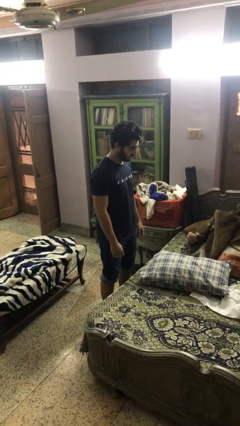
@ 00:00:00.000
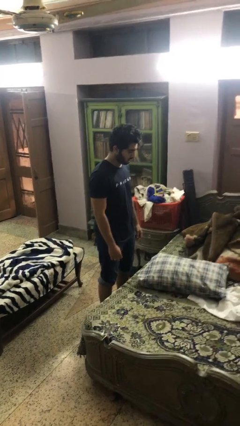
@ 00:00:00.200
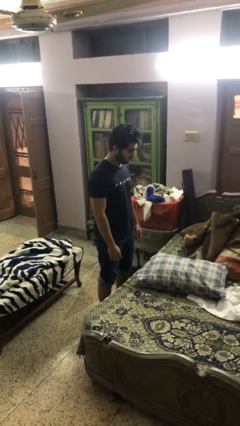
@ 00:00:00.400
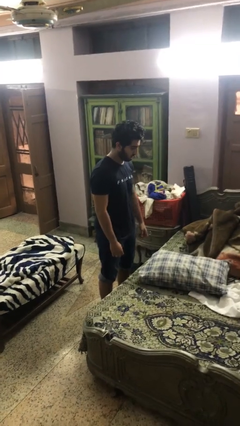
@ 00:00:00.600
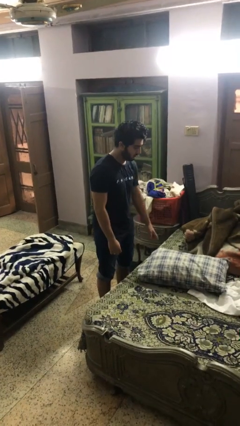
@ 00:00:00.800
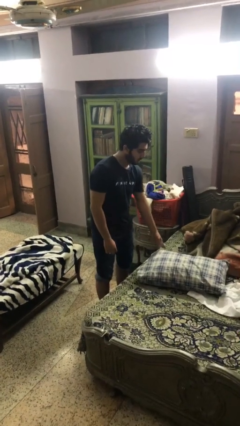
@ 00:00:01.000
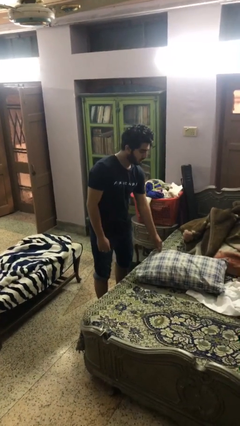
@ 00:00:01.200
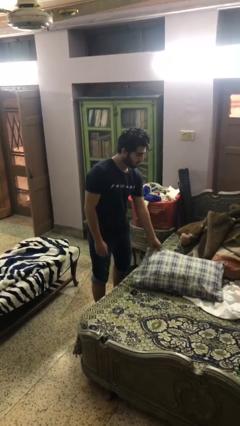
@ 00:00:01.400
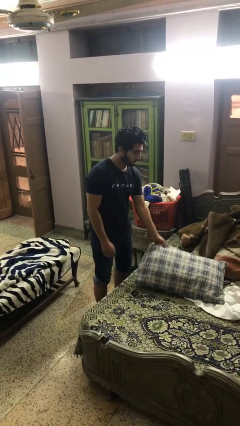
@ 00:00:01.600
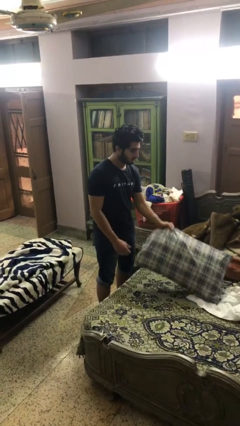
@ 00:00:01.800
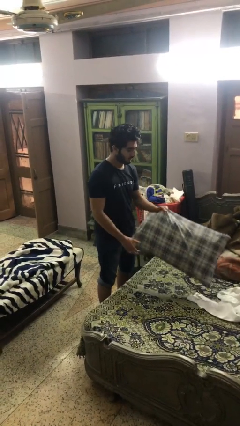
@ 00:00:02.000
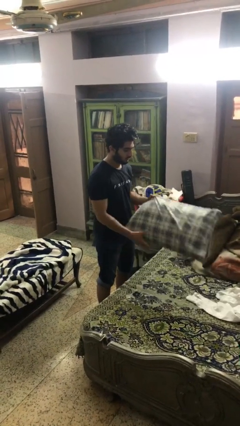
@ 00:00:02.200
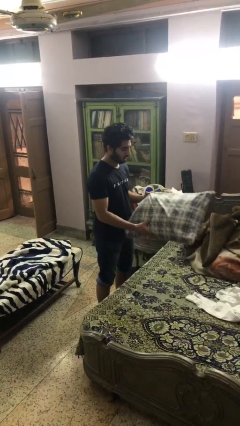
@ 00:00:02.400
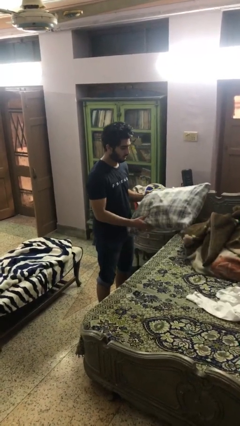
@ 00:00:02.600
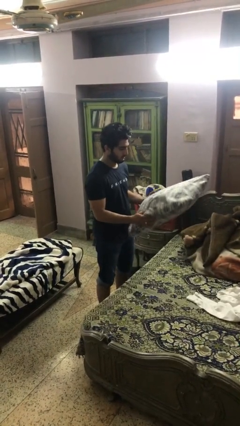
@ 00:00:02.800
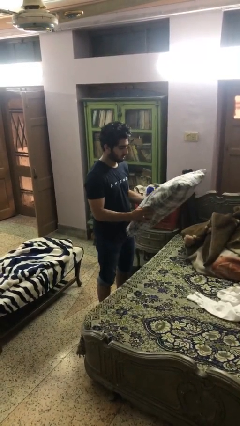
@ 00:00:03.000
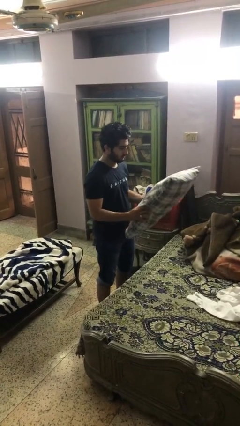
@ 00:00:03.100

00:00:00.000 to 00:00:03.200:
person picks up object from bed

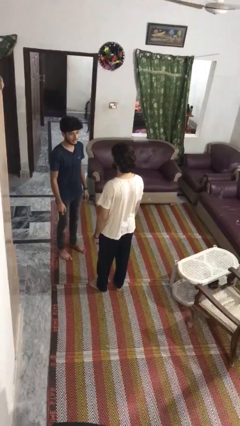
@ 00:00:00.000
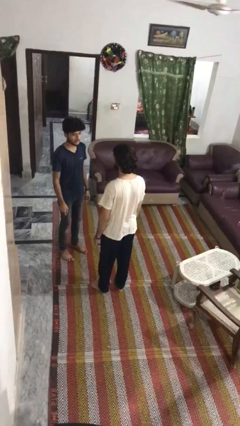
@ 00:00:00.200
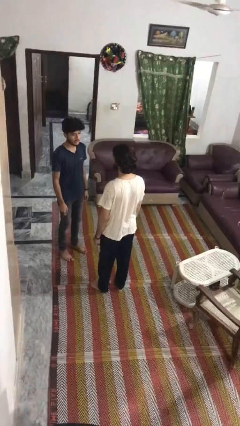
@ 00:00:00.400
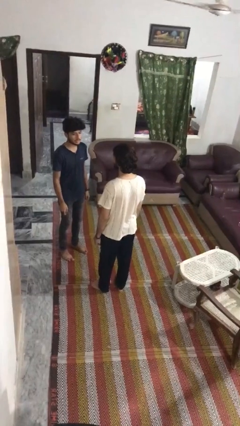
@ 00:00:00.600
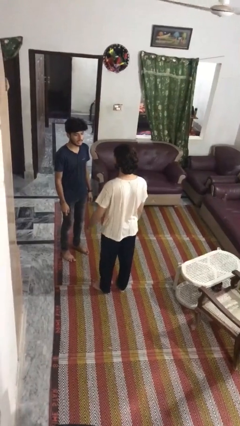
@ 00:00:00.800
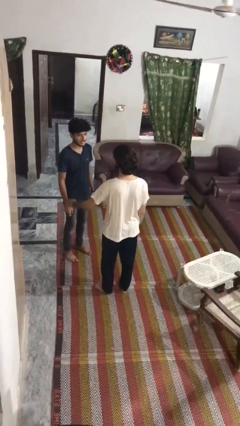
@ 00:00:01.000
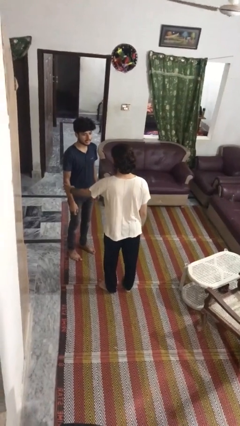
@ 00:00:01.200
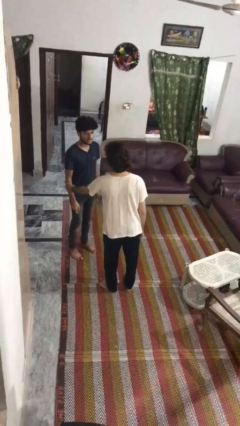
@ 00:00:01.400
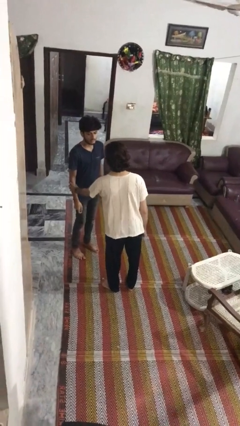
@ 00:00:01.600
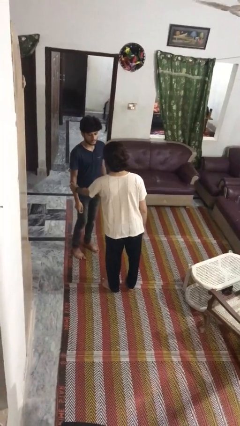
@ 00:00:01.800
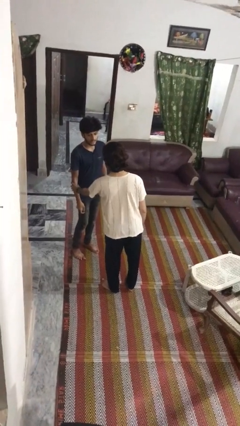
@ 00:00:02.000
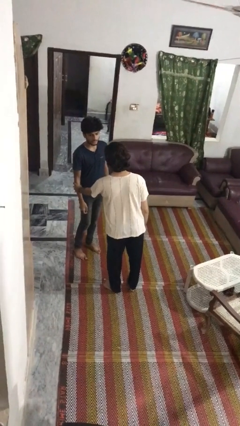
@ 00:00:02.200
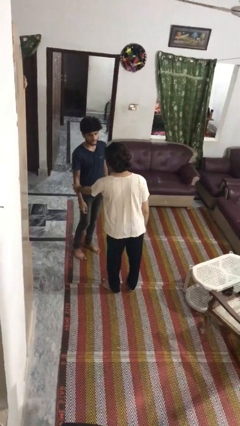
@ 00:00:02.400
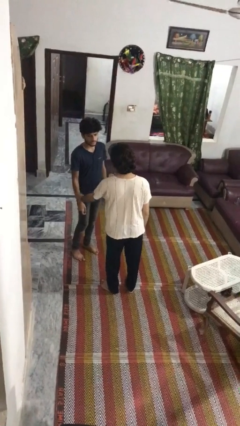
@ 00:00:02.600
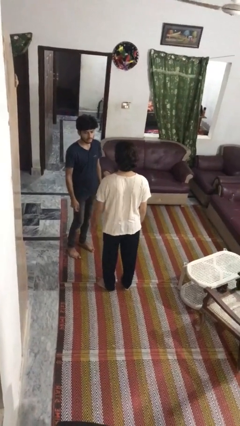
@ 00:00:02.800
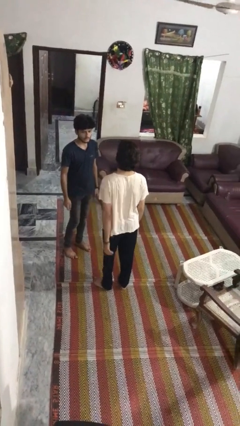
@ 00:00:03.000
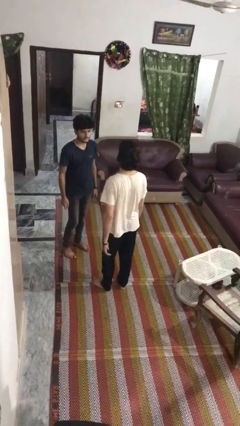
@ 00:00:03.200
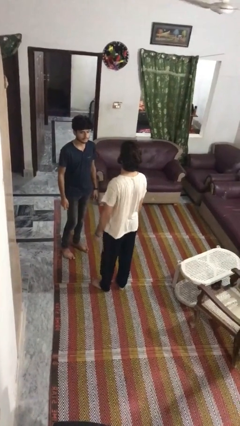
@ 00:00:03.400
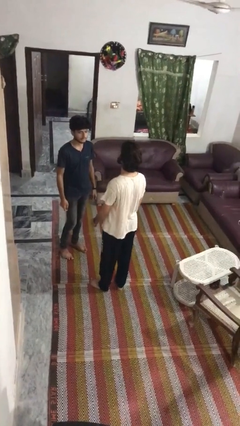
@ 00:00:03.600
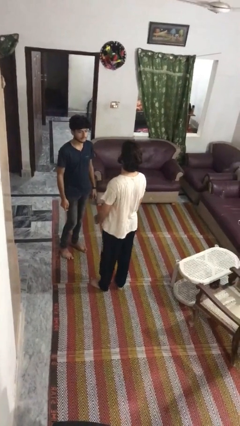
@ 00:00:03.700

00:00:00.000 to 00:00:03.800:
person grabs person by forearm

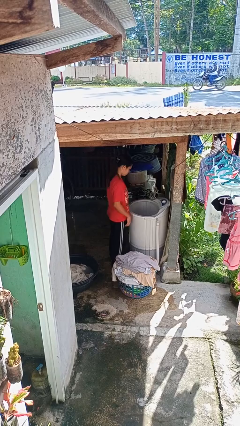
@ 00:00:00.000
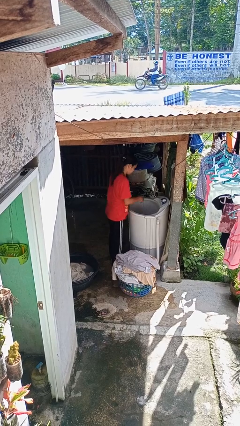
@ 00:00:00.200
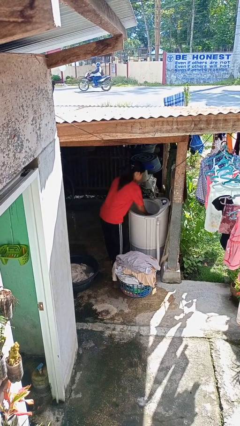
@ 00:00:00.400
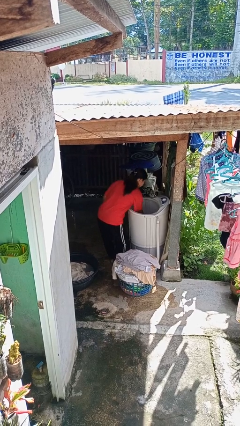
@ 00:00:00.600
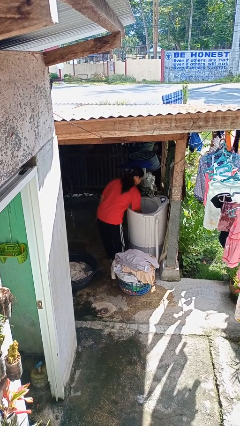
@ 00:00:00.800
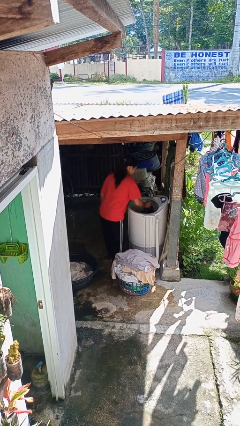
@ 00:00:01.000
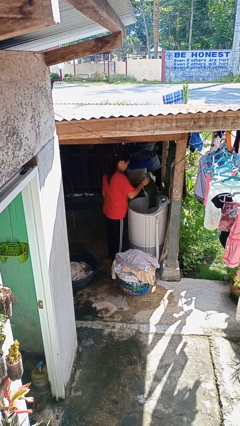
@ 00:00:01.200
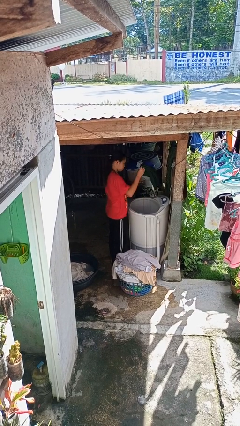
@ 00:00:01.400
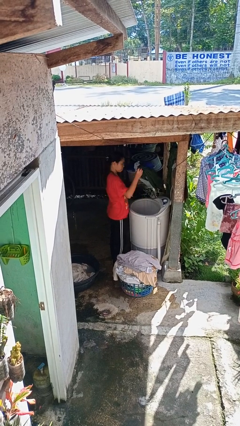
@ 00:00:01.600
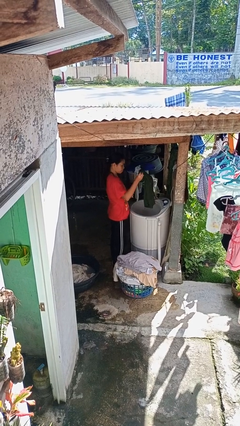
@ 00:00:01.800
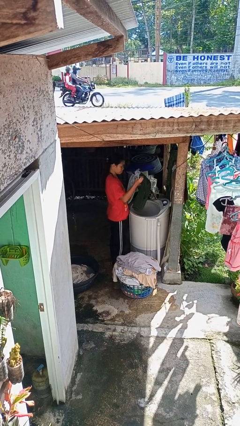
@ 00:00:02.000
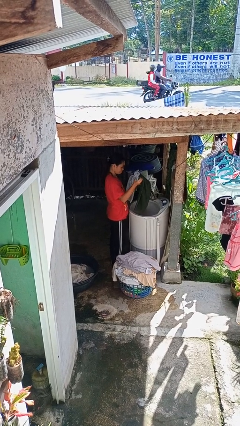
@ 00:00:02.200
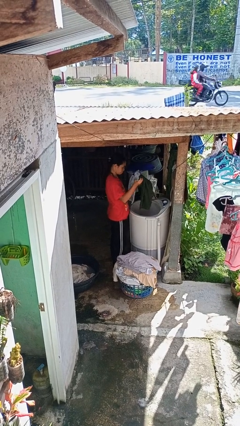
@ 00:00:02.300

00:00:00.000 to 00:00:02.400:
person unloads clotheswasher

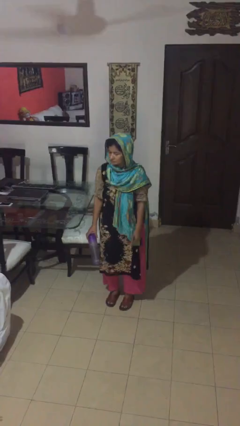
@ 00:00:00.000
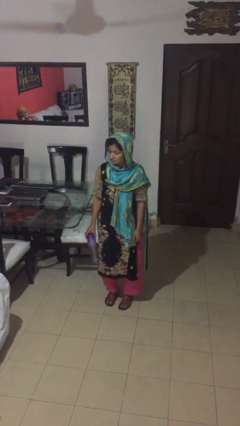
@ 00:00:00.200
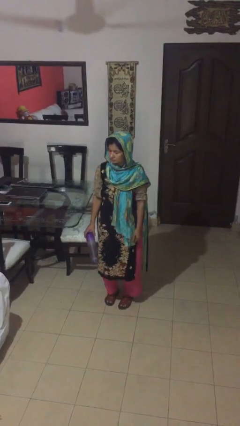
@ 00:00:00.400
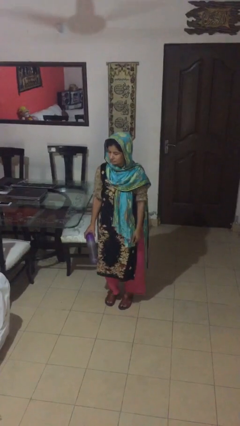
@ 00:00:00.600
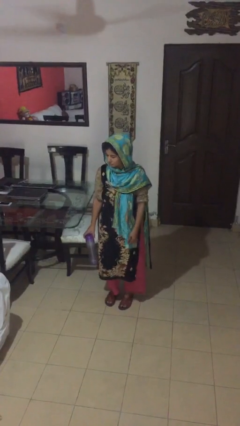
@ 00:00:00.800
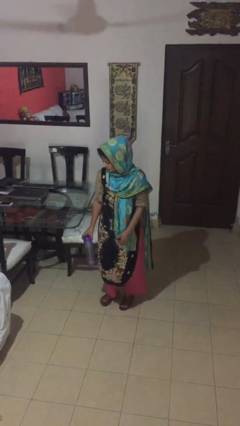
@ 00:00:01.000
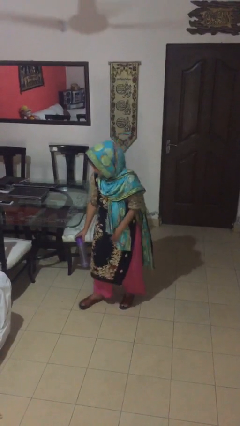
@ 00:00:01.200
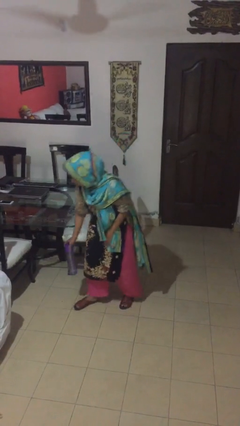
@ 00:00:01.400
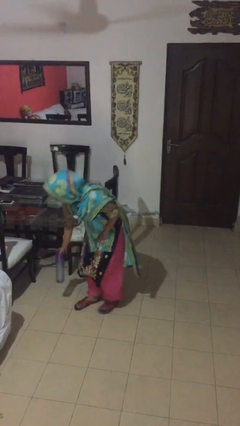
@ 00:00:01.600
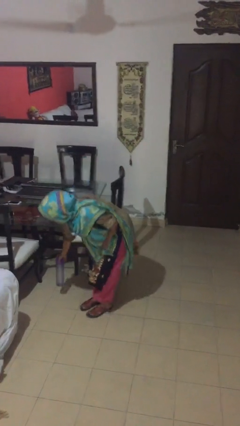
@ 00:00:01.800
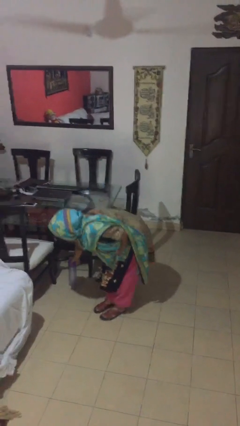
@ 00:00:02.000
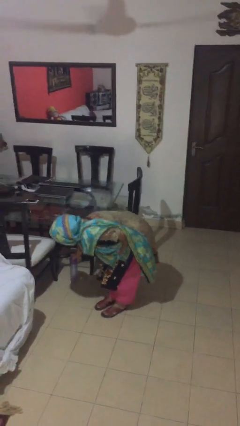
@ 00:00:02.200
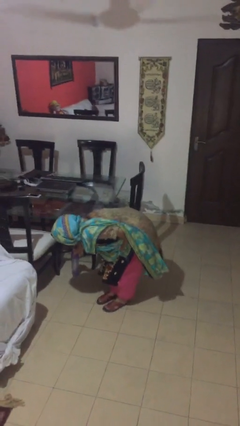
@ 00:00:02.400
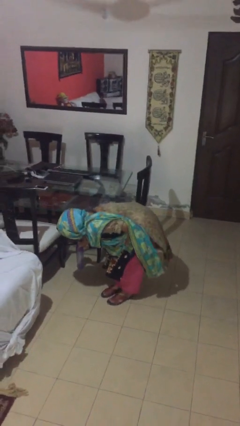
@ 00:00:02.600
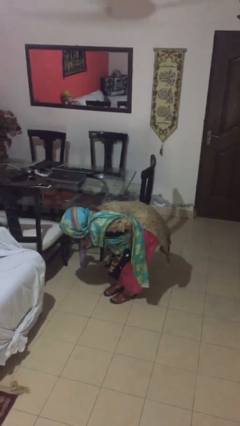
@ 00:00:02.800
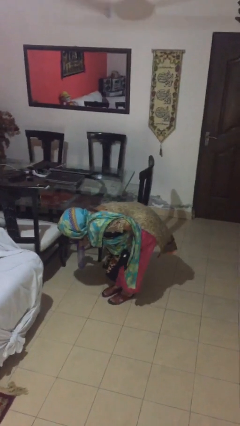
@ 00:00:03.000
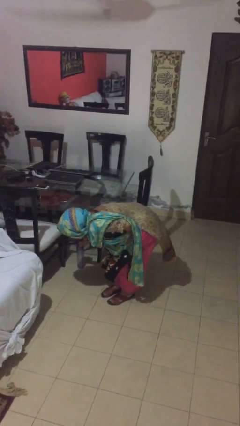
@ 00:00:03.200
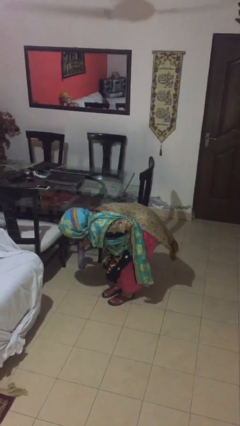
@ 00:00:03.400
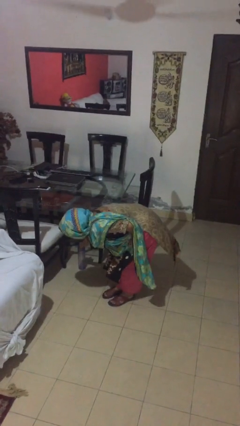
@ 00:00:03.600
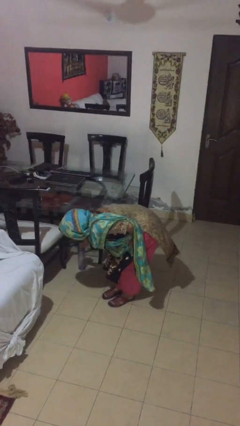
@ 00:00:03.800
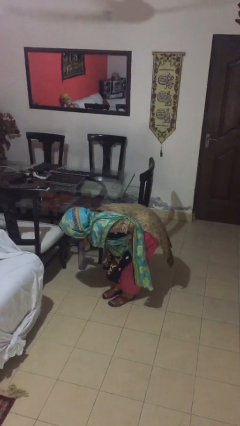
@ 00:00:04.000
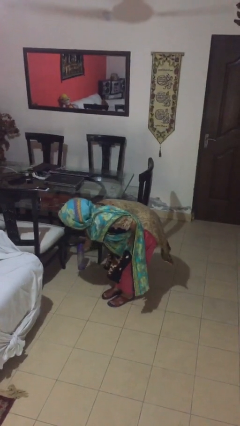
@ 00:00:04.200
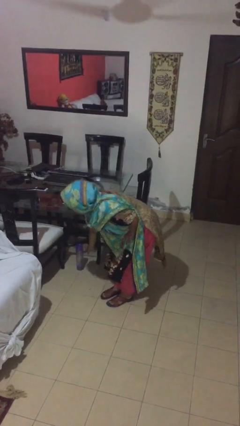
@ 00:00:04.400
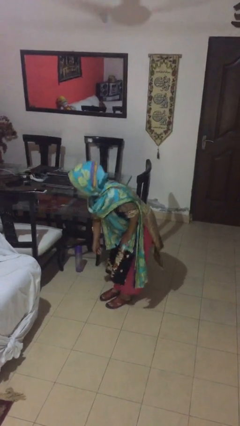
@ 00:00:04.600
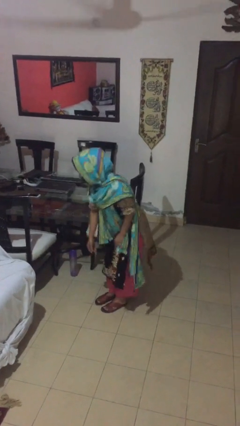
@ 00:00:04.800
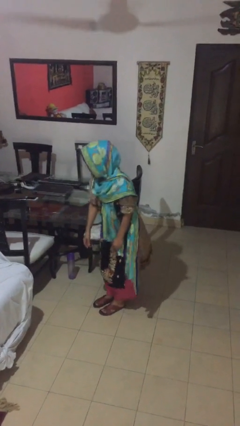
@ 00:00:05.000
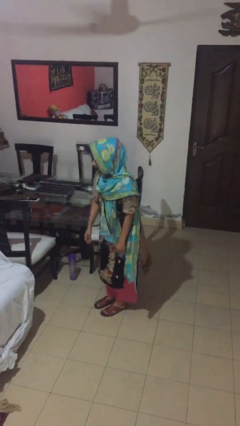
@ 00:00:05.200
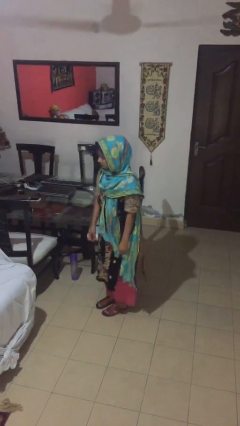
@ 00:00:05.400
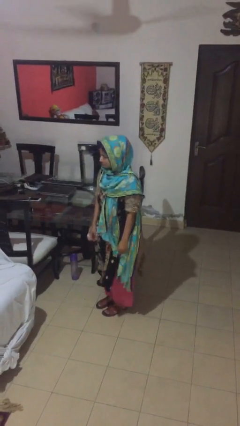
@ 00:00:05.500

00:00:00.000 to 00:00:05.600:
person puts down object on table

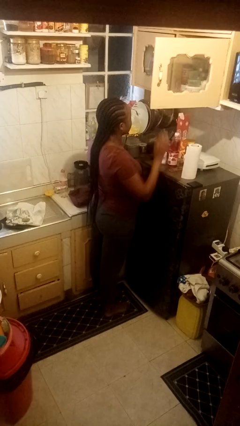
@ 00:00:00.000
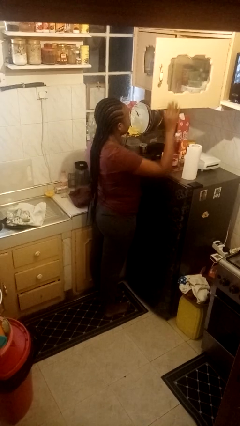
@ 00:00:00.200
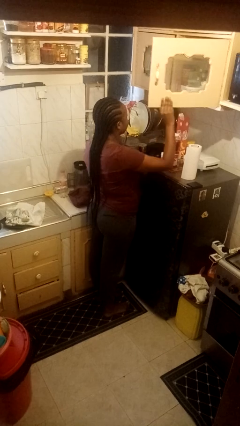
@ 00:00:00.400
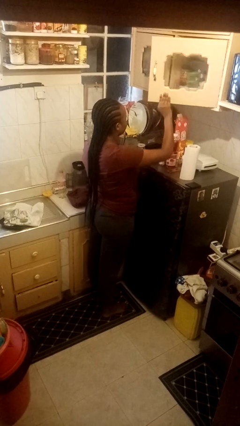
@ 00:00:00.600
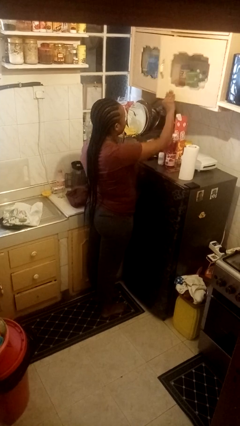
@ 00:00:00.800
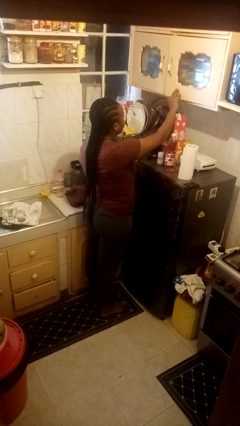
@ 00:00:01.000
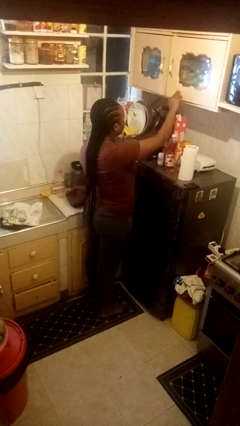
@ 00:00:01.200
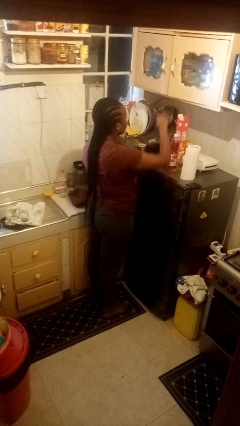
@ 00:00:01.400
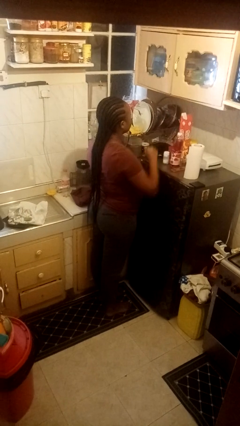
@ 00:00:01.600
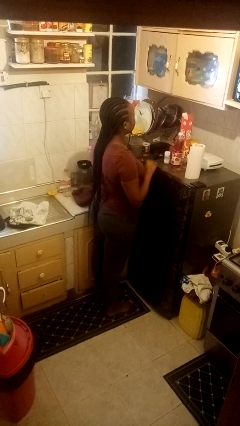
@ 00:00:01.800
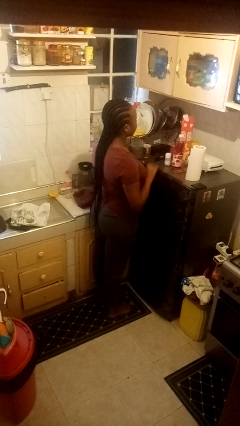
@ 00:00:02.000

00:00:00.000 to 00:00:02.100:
person closes cabinet
